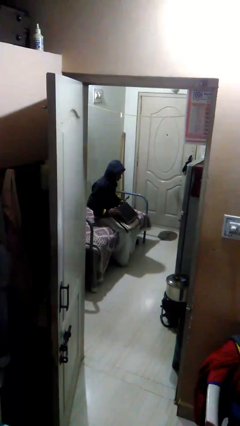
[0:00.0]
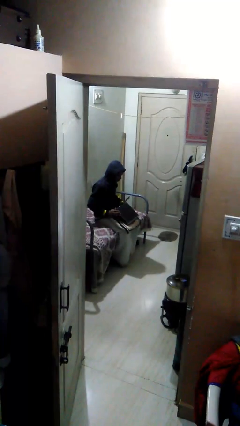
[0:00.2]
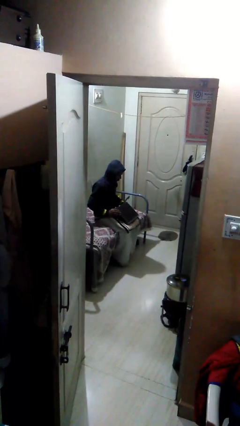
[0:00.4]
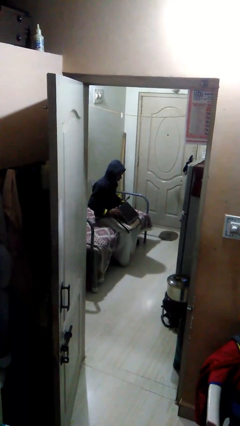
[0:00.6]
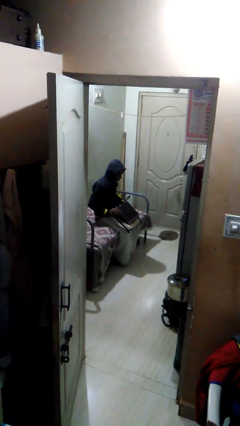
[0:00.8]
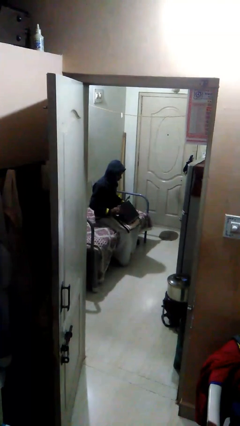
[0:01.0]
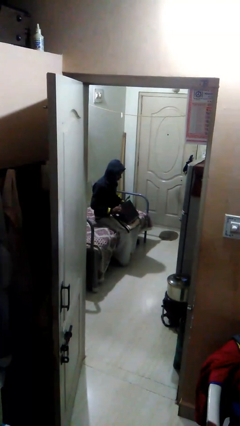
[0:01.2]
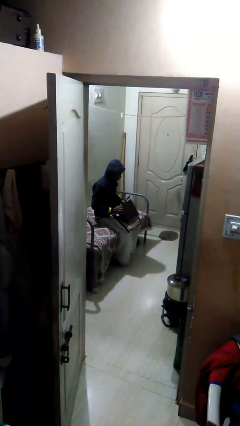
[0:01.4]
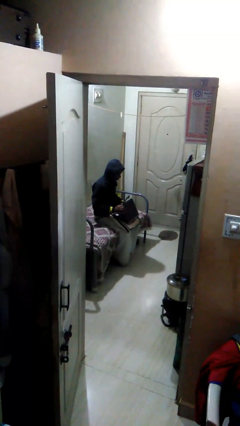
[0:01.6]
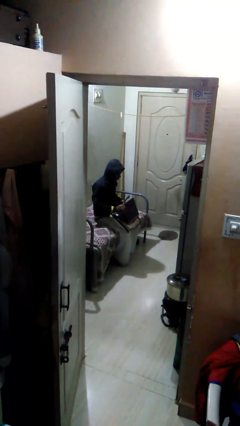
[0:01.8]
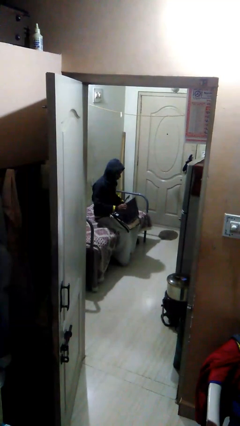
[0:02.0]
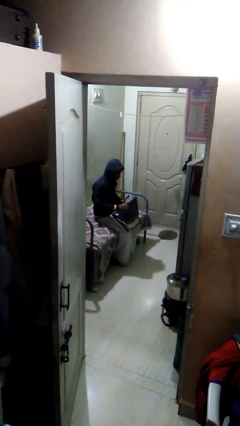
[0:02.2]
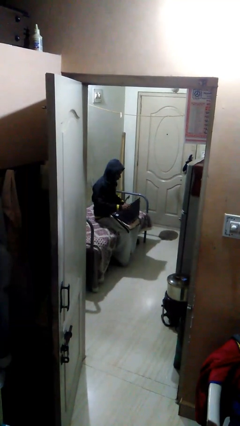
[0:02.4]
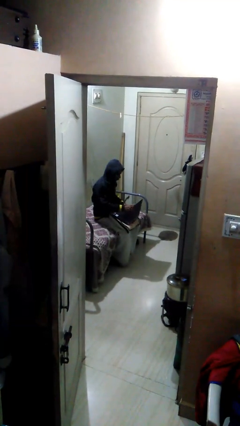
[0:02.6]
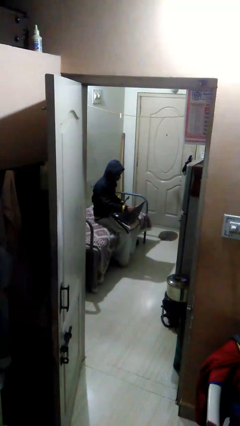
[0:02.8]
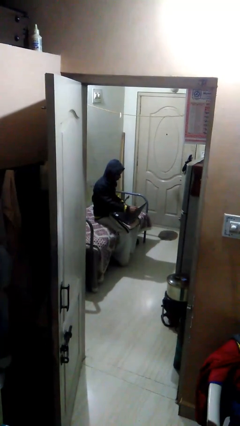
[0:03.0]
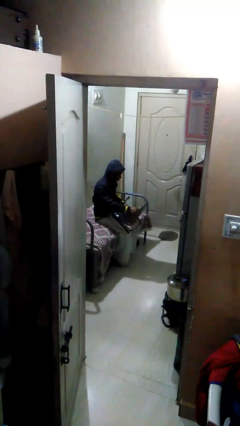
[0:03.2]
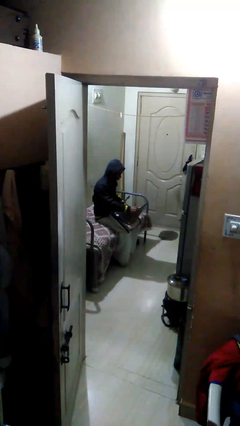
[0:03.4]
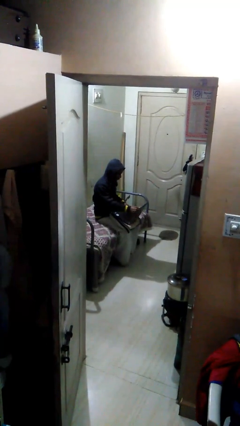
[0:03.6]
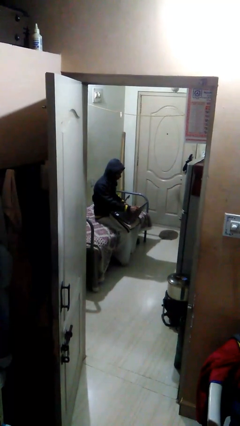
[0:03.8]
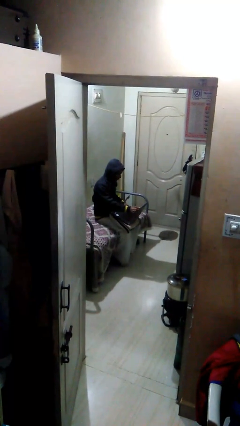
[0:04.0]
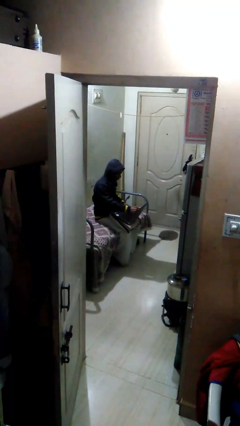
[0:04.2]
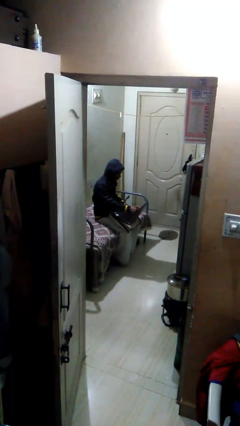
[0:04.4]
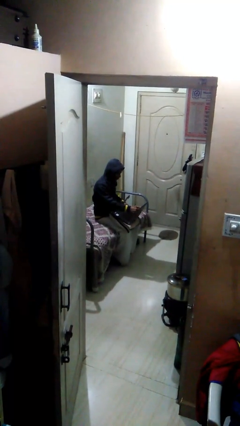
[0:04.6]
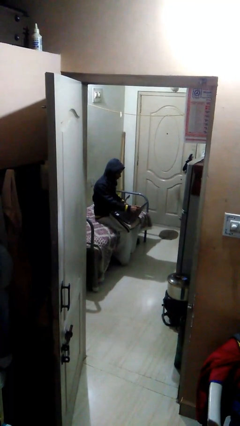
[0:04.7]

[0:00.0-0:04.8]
person interacts with laptop

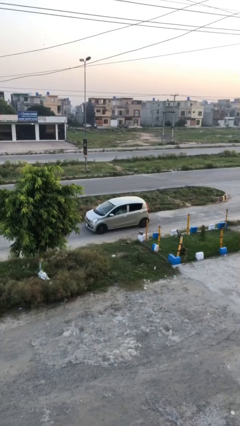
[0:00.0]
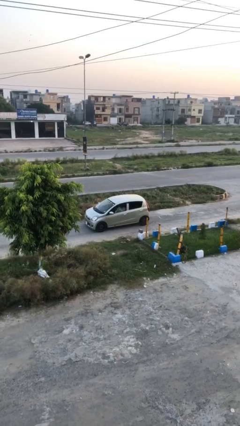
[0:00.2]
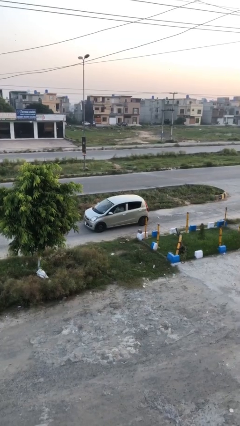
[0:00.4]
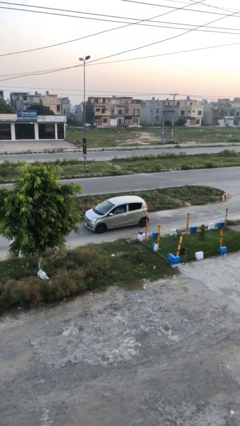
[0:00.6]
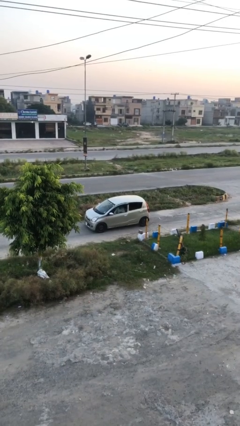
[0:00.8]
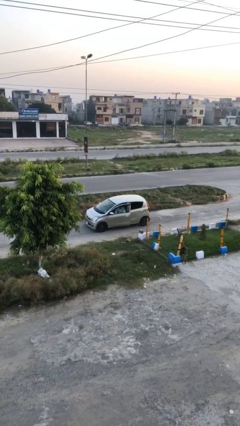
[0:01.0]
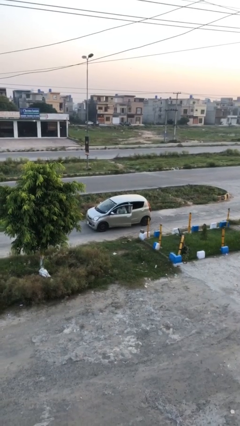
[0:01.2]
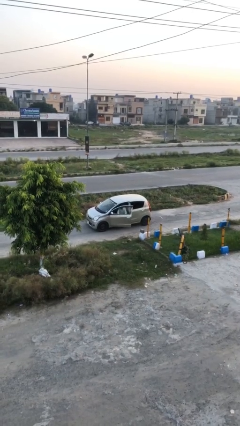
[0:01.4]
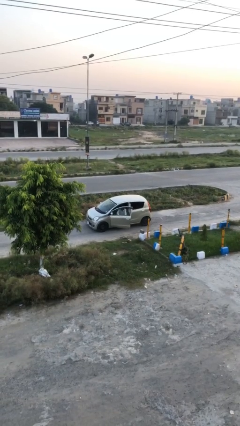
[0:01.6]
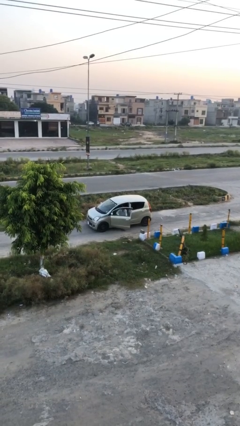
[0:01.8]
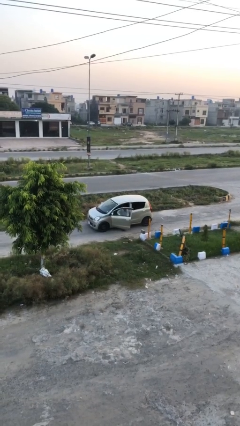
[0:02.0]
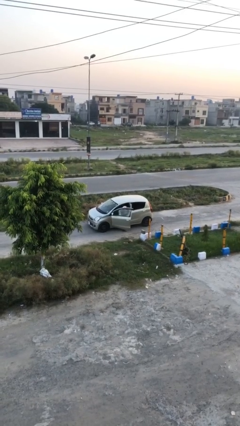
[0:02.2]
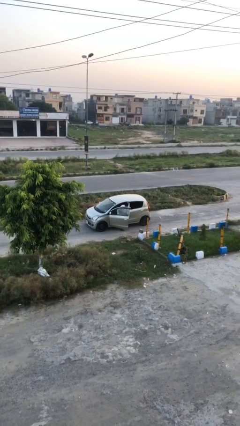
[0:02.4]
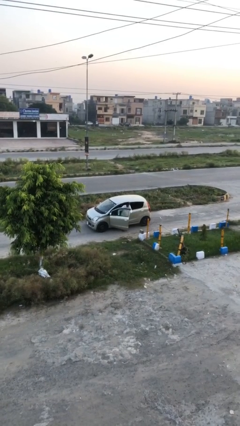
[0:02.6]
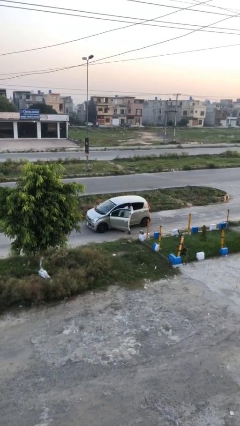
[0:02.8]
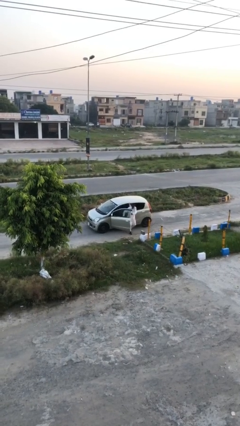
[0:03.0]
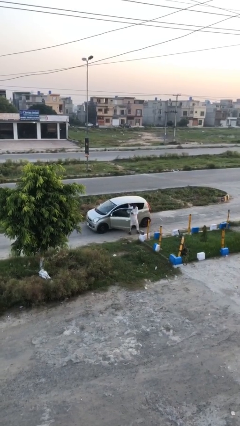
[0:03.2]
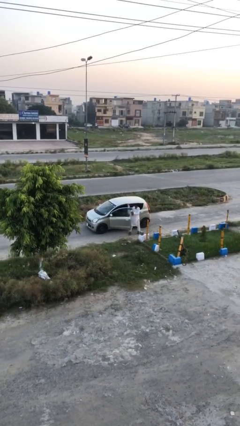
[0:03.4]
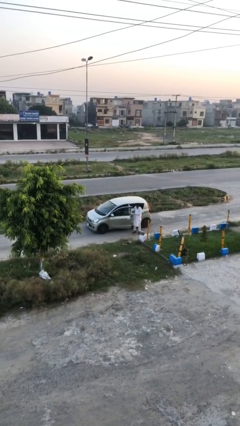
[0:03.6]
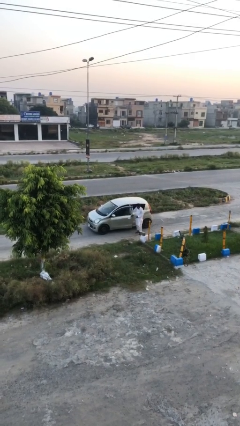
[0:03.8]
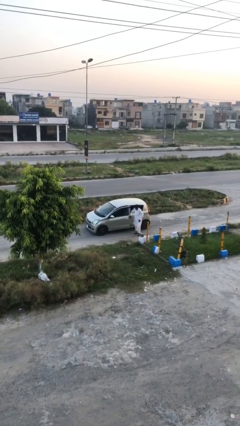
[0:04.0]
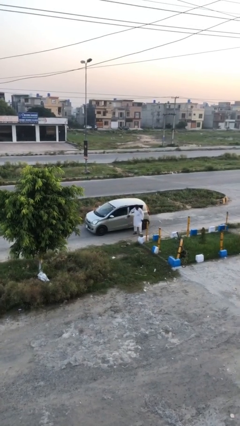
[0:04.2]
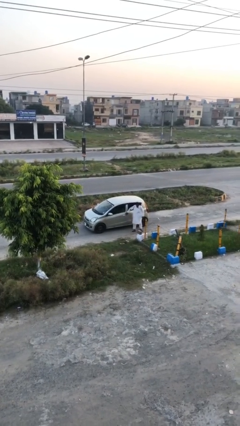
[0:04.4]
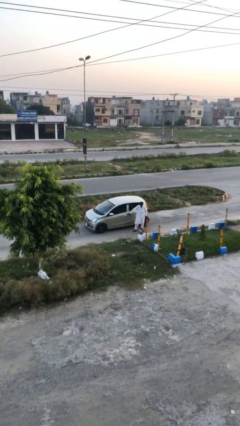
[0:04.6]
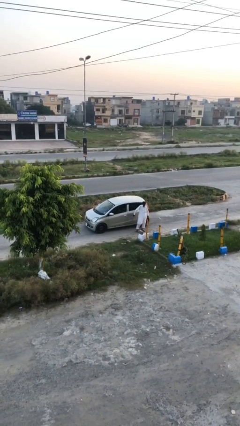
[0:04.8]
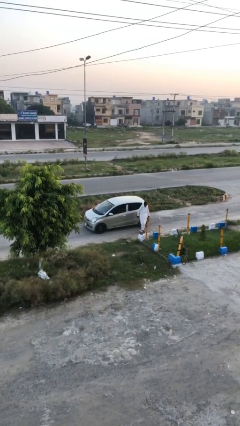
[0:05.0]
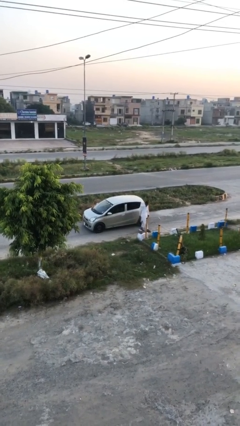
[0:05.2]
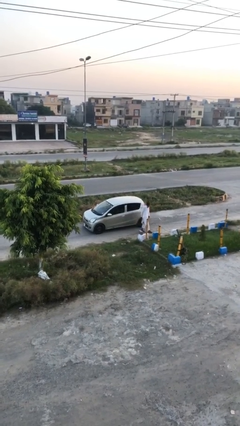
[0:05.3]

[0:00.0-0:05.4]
car drops off person

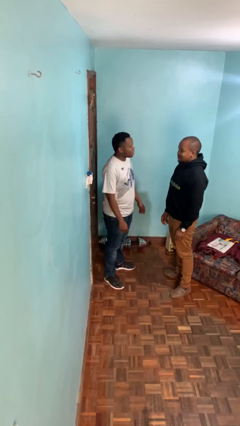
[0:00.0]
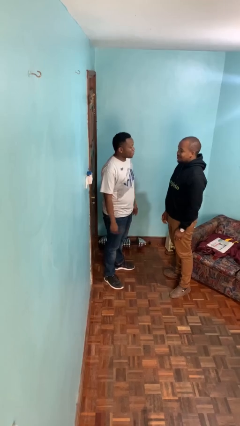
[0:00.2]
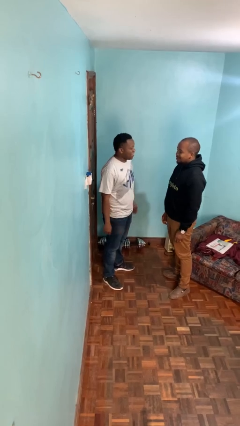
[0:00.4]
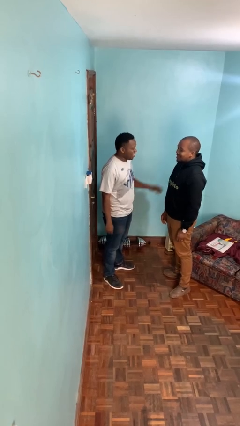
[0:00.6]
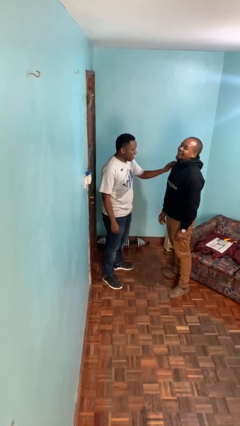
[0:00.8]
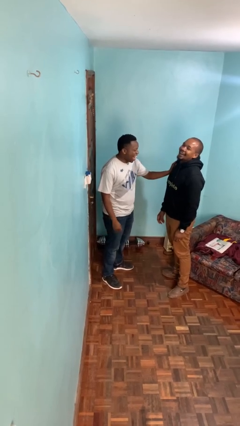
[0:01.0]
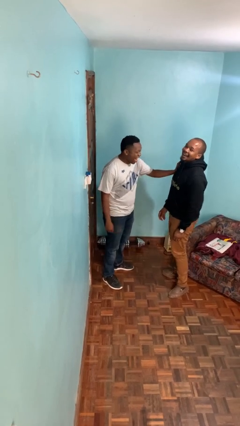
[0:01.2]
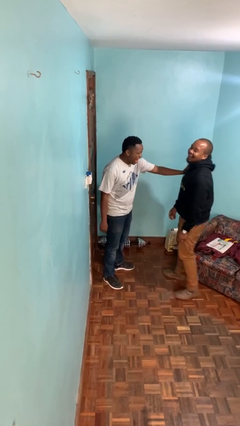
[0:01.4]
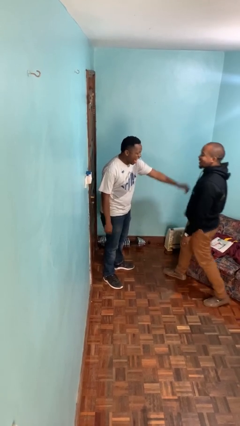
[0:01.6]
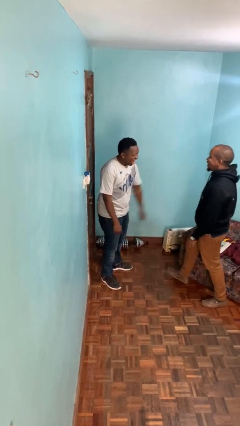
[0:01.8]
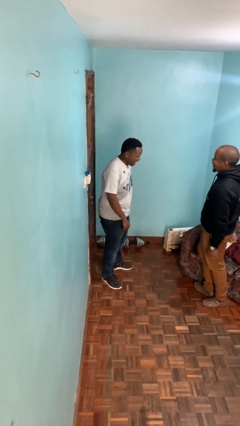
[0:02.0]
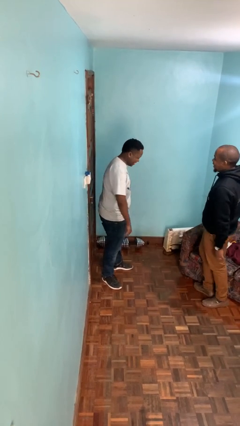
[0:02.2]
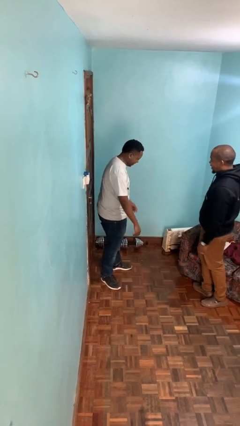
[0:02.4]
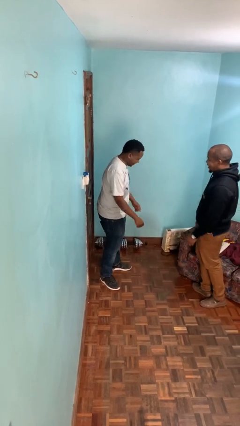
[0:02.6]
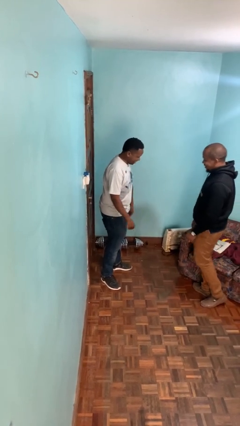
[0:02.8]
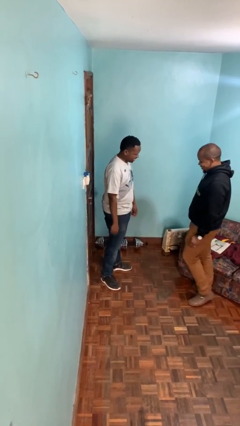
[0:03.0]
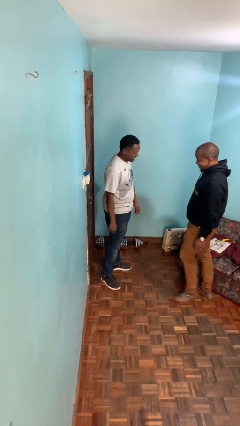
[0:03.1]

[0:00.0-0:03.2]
person shoves person

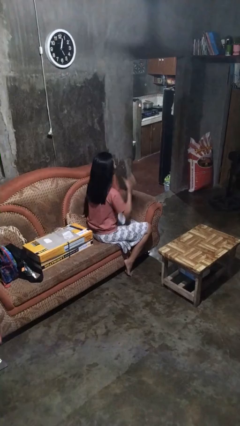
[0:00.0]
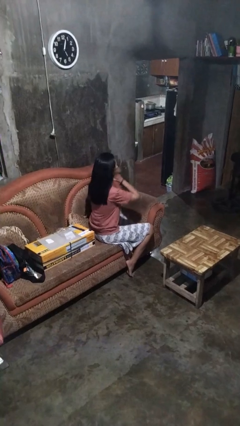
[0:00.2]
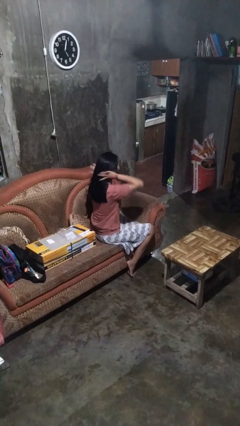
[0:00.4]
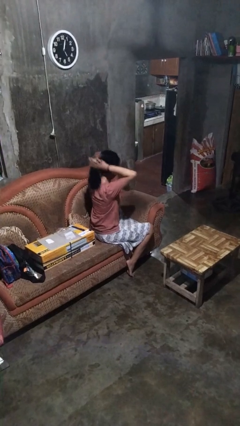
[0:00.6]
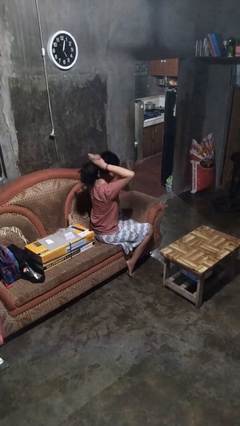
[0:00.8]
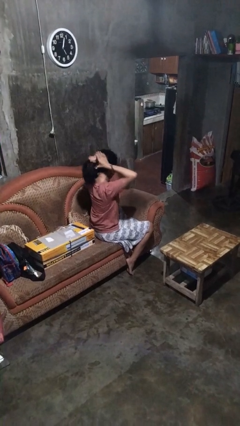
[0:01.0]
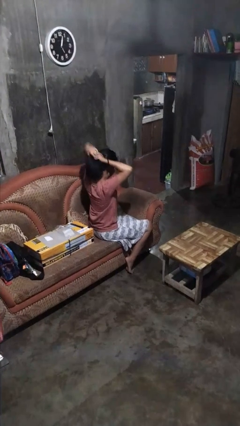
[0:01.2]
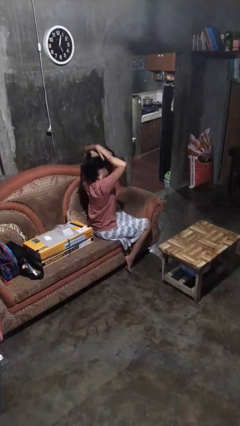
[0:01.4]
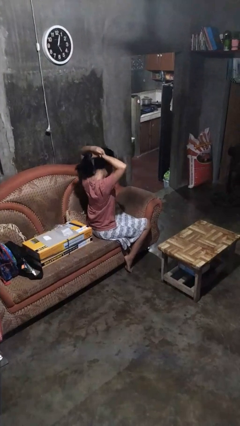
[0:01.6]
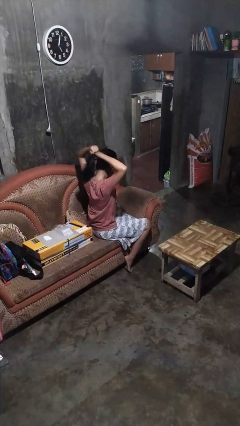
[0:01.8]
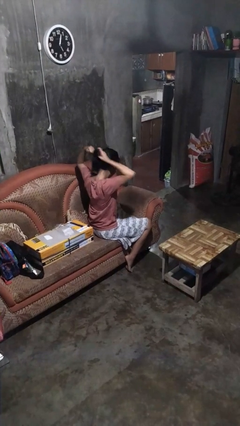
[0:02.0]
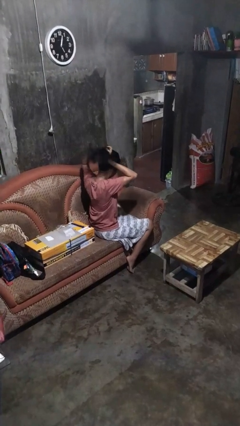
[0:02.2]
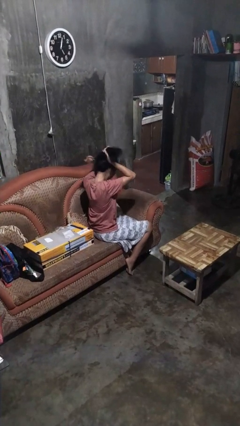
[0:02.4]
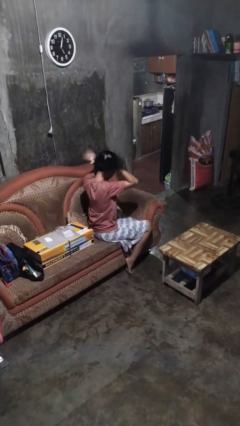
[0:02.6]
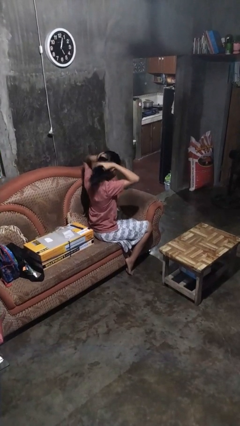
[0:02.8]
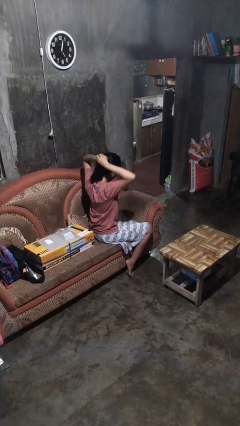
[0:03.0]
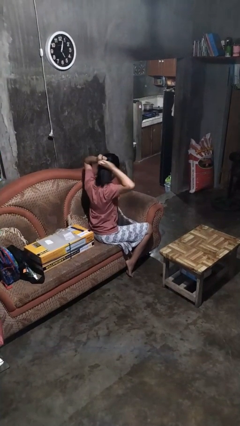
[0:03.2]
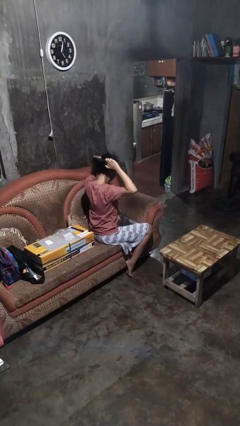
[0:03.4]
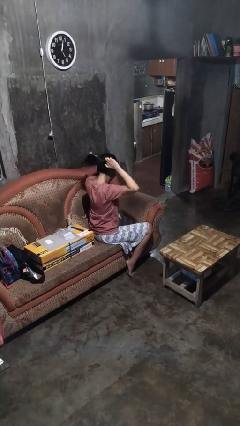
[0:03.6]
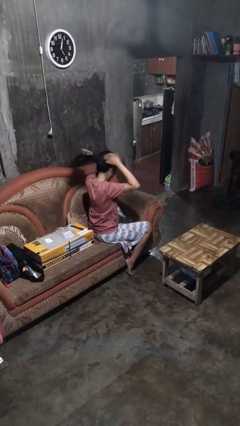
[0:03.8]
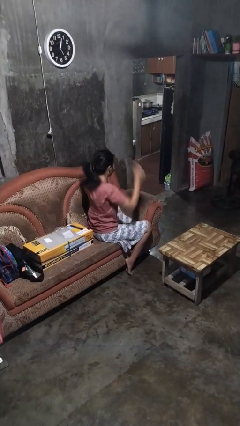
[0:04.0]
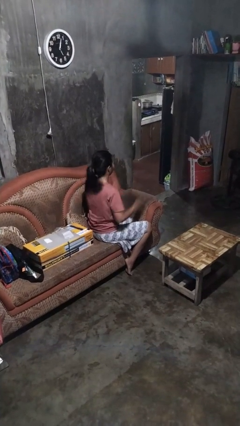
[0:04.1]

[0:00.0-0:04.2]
person puts hair in ponytail
